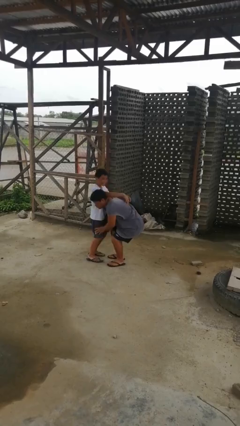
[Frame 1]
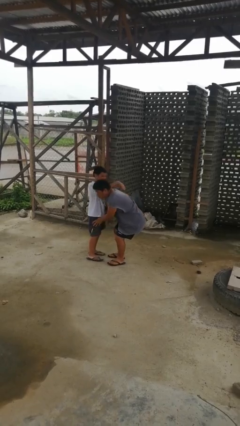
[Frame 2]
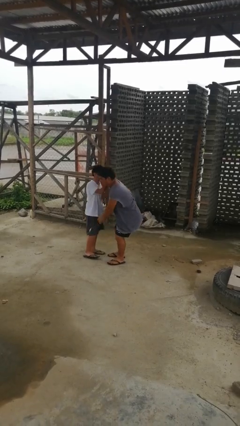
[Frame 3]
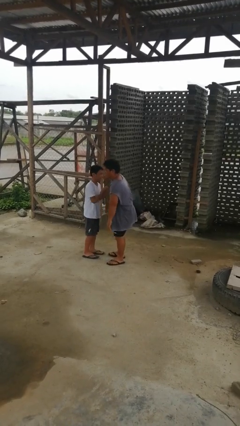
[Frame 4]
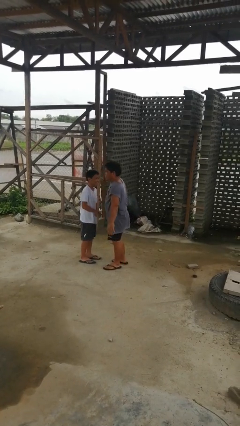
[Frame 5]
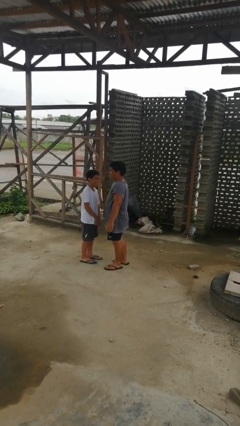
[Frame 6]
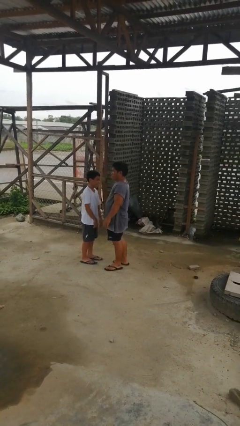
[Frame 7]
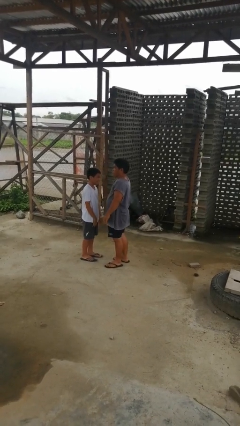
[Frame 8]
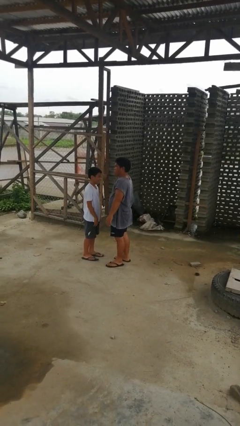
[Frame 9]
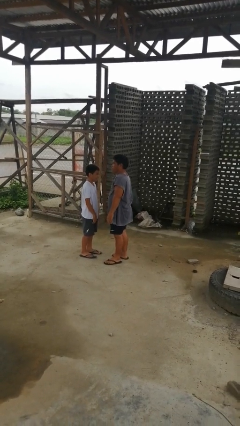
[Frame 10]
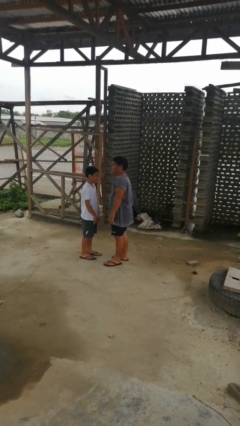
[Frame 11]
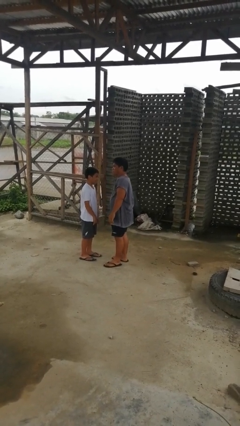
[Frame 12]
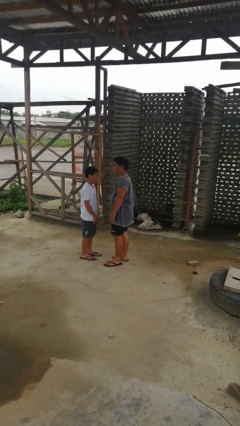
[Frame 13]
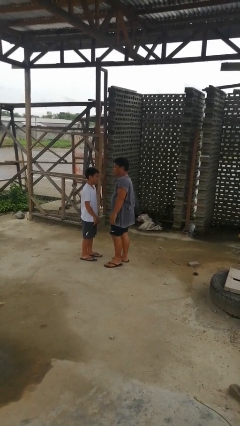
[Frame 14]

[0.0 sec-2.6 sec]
person puts down person

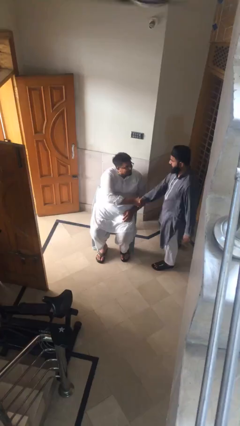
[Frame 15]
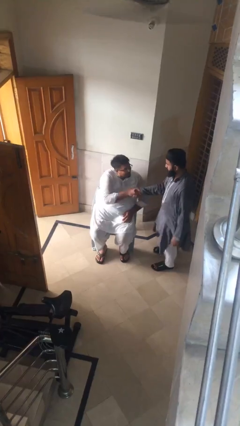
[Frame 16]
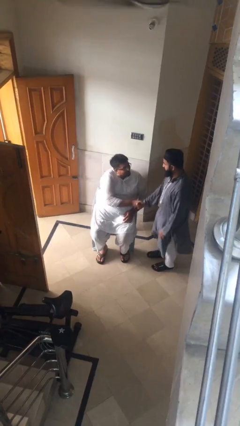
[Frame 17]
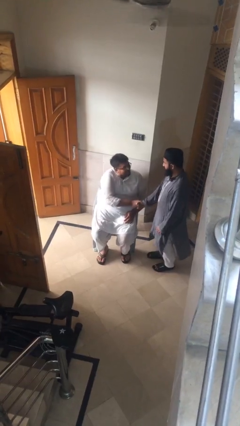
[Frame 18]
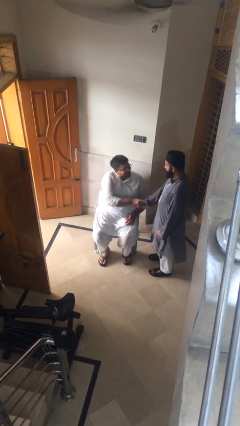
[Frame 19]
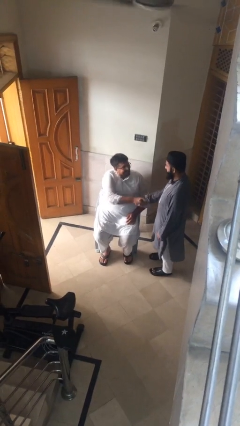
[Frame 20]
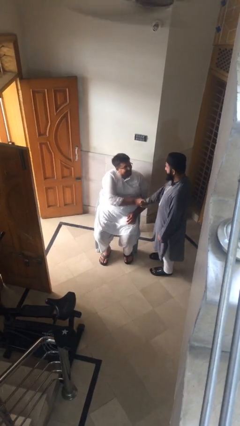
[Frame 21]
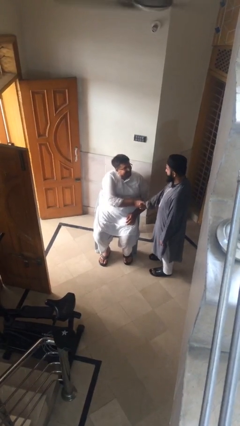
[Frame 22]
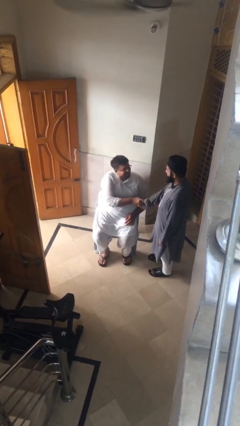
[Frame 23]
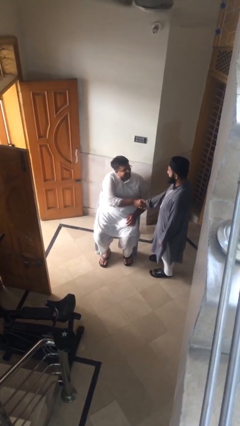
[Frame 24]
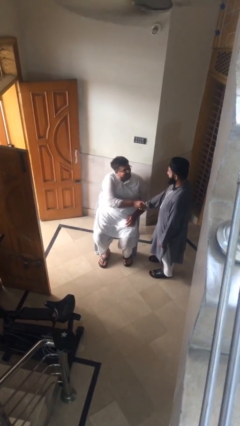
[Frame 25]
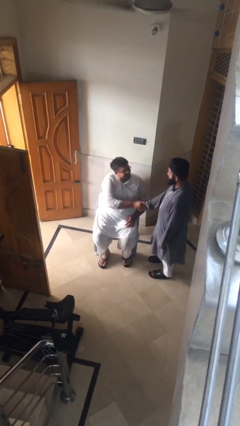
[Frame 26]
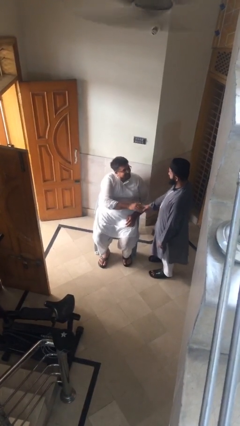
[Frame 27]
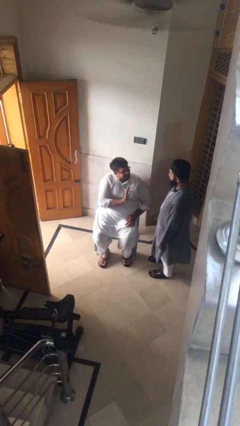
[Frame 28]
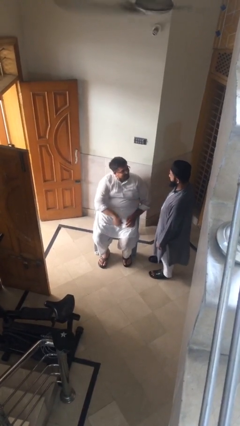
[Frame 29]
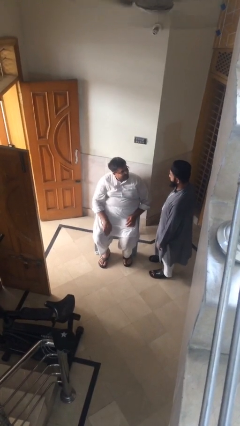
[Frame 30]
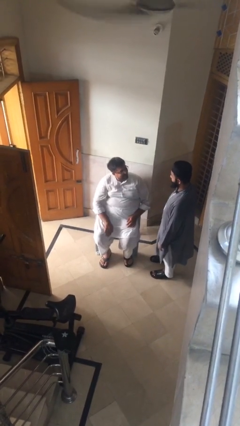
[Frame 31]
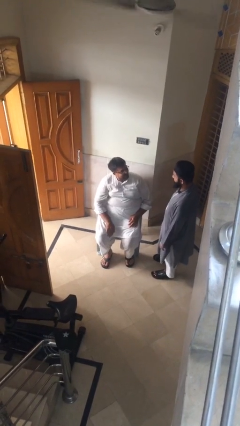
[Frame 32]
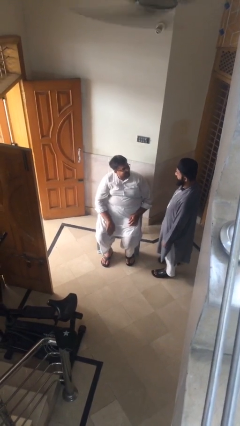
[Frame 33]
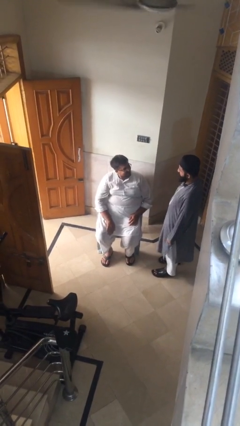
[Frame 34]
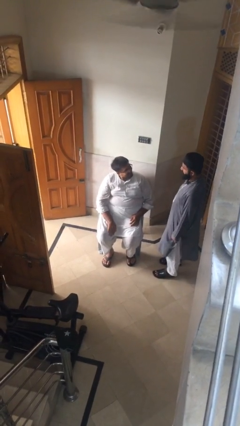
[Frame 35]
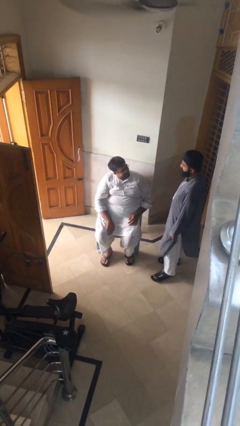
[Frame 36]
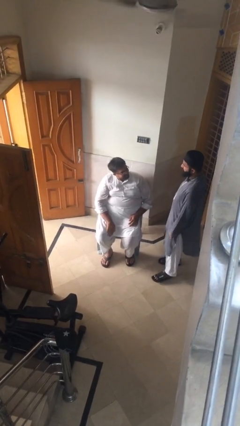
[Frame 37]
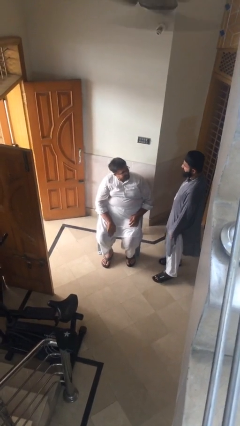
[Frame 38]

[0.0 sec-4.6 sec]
person shakes hand

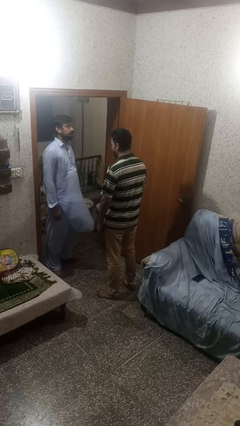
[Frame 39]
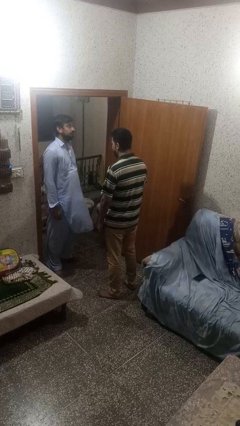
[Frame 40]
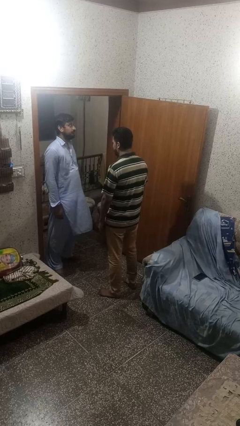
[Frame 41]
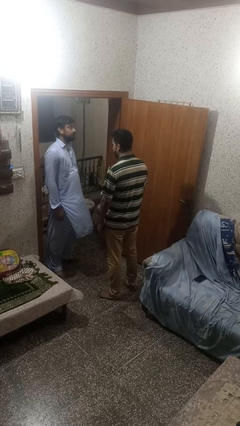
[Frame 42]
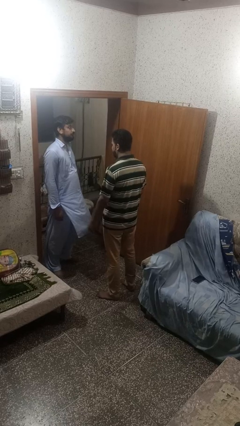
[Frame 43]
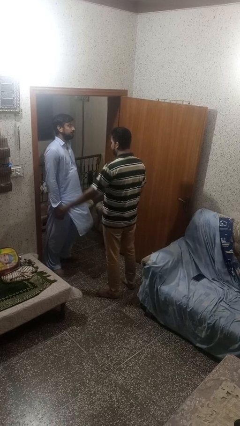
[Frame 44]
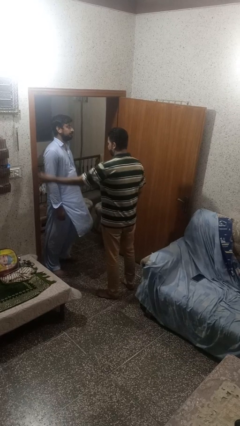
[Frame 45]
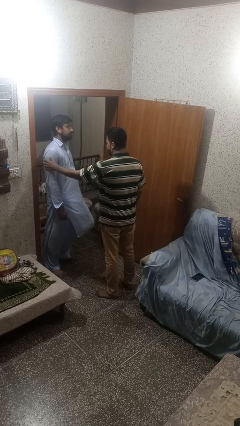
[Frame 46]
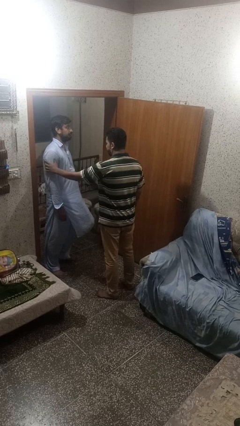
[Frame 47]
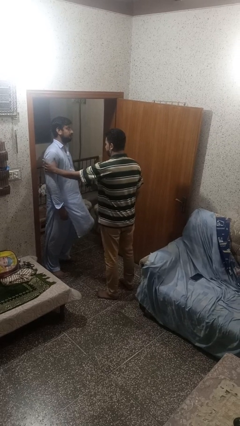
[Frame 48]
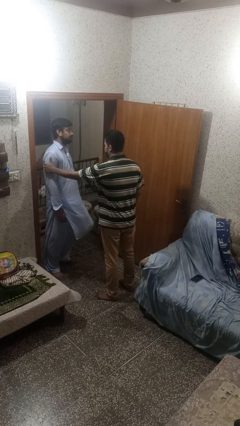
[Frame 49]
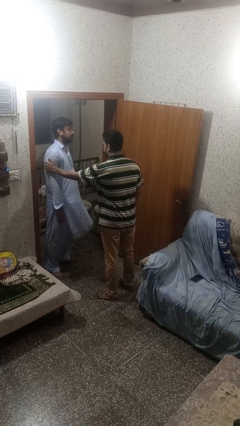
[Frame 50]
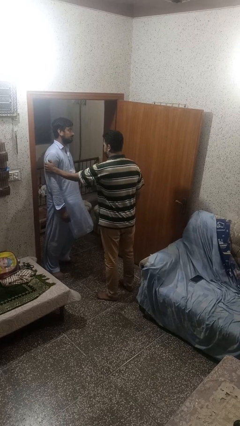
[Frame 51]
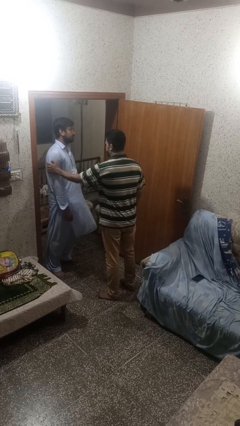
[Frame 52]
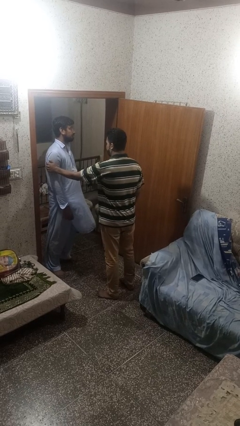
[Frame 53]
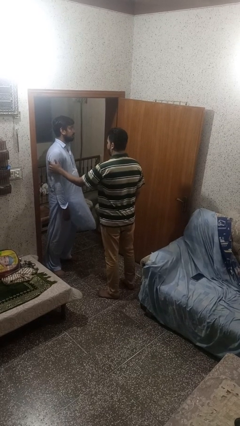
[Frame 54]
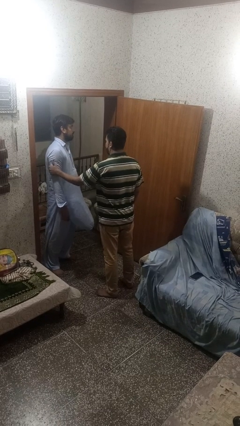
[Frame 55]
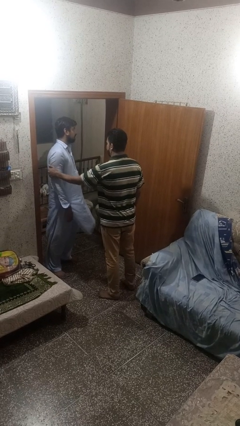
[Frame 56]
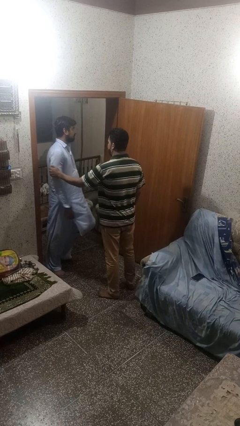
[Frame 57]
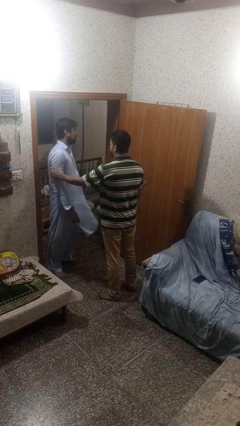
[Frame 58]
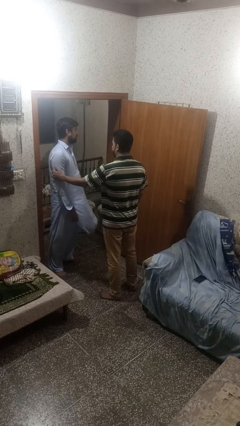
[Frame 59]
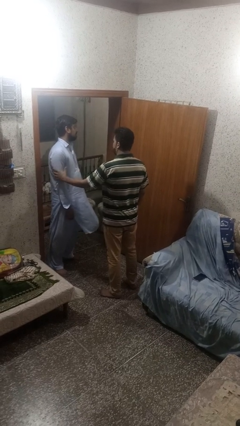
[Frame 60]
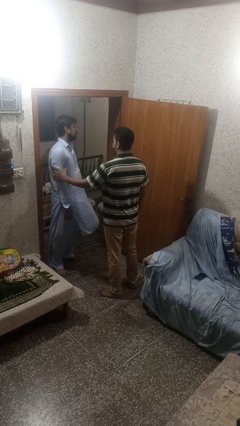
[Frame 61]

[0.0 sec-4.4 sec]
person grabs person by bicep

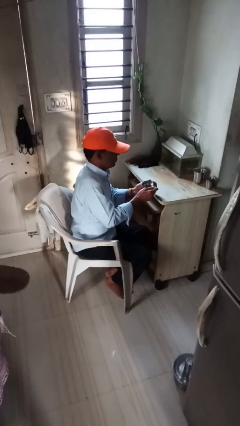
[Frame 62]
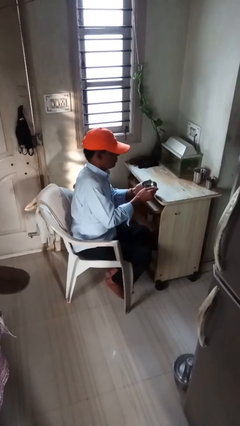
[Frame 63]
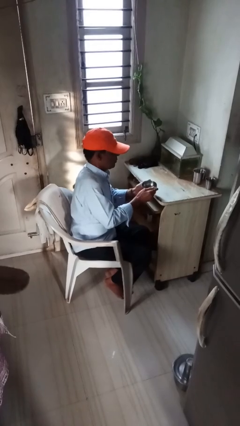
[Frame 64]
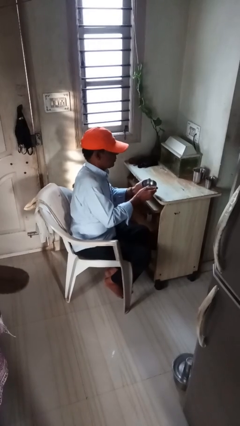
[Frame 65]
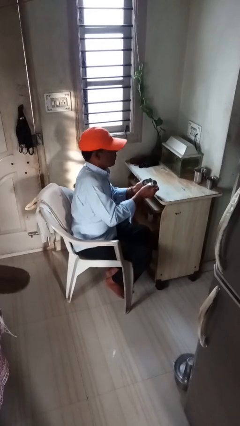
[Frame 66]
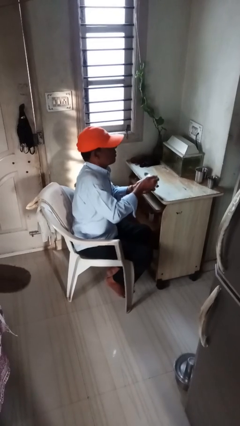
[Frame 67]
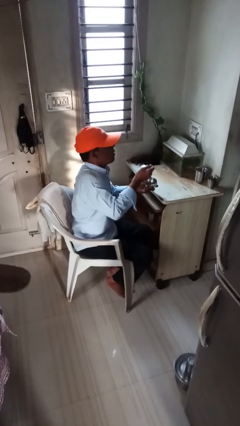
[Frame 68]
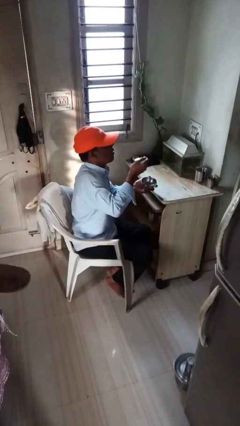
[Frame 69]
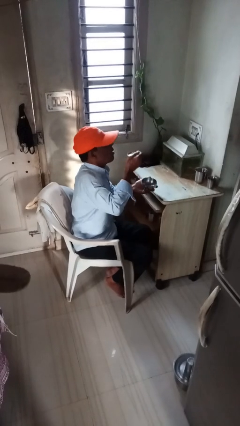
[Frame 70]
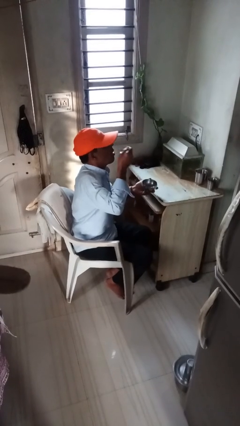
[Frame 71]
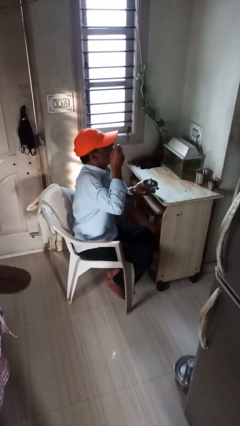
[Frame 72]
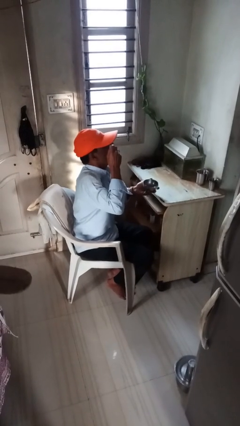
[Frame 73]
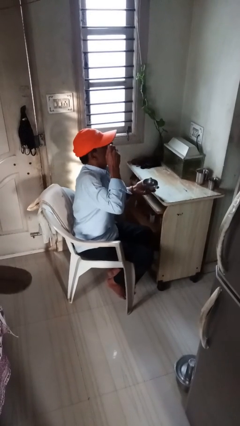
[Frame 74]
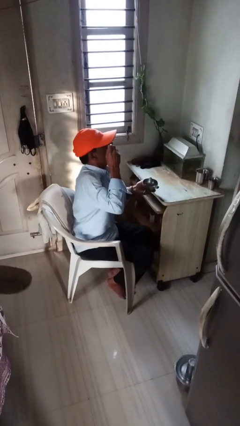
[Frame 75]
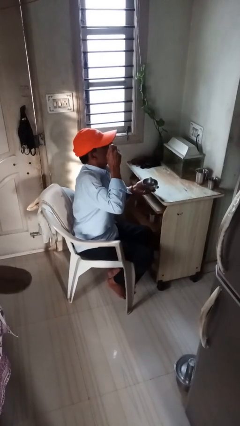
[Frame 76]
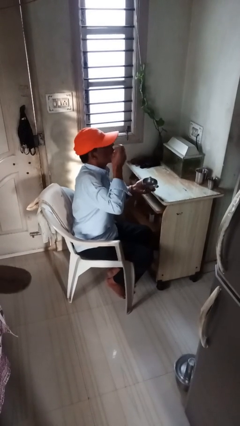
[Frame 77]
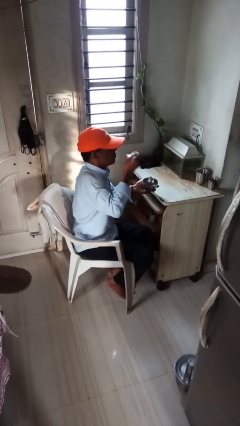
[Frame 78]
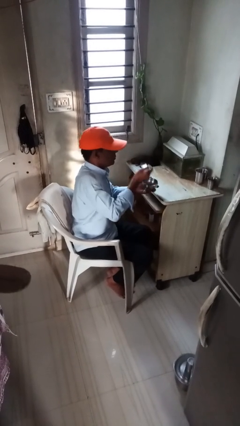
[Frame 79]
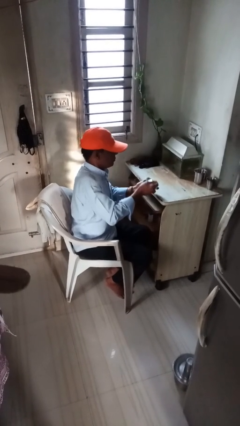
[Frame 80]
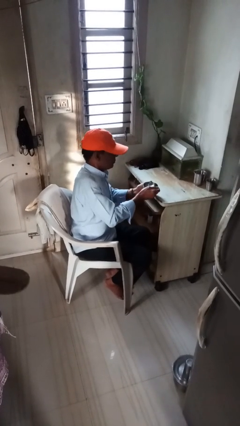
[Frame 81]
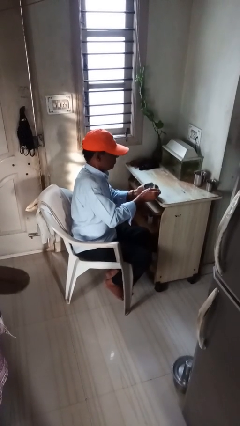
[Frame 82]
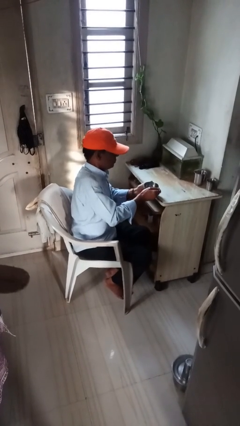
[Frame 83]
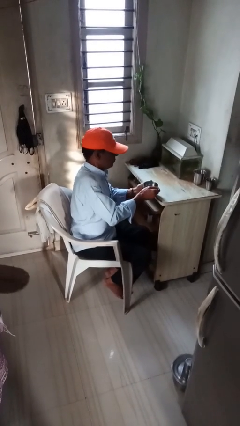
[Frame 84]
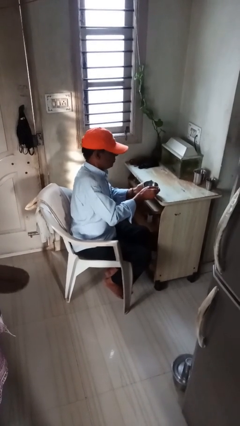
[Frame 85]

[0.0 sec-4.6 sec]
person eats with utensil

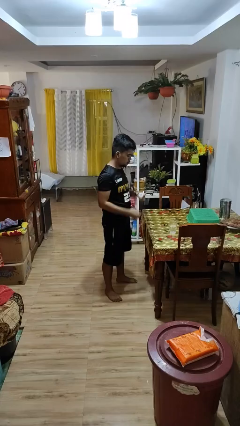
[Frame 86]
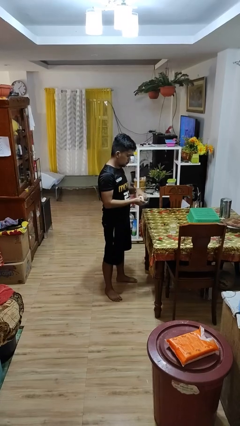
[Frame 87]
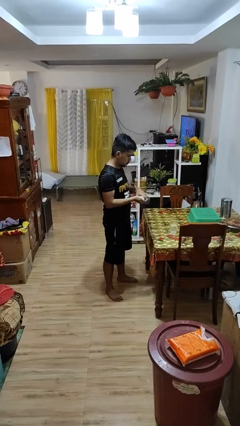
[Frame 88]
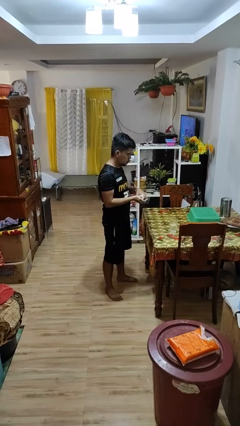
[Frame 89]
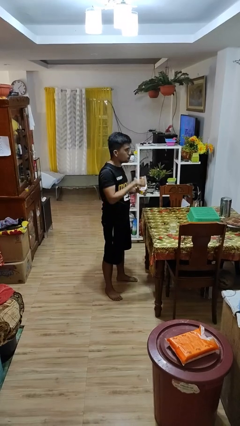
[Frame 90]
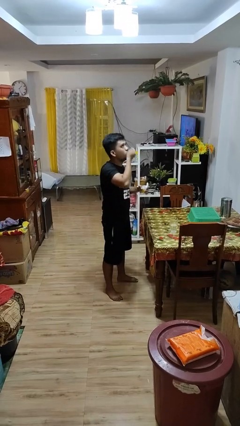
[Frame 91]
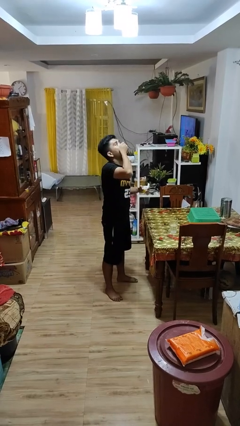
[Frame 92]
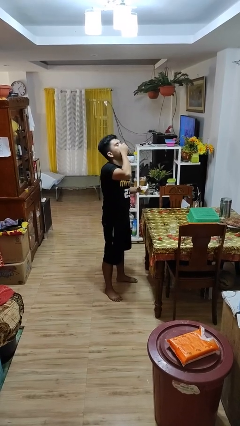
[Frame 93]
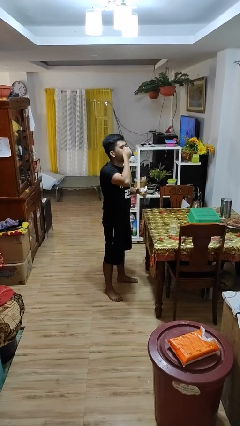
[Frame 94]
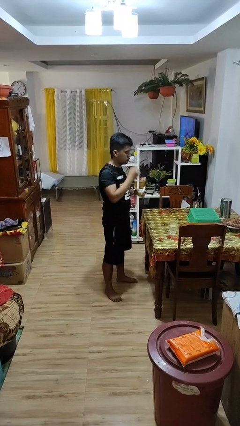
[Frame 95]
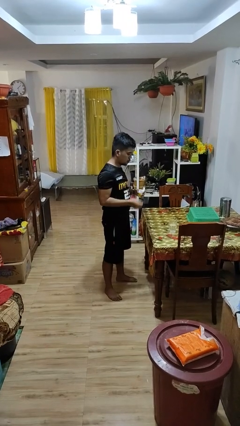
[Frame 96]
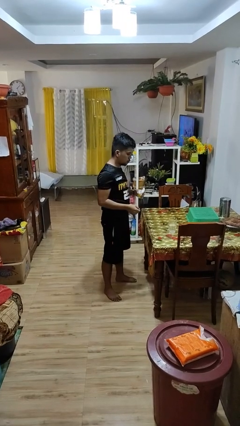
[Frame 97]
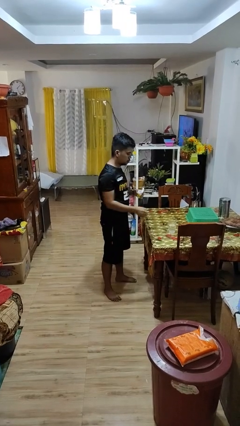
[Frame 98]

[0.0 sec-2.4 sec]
person takes medicine pills
